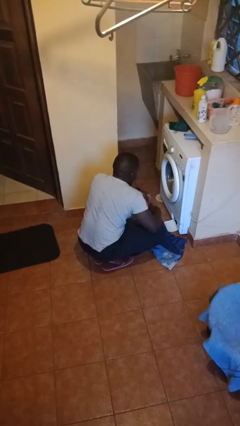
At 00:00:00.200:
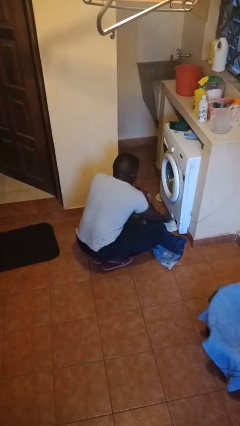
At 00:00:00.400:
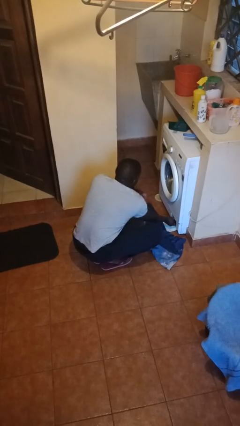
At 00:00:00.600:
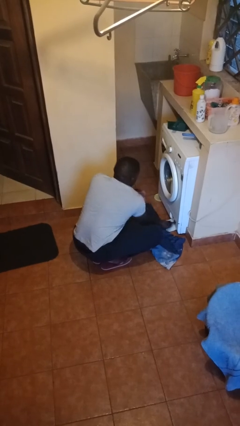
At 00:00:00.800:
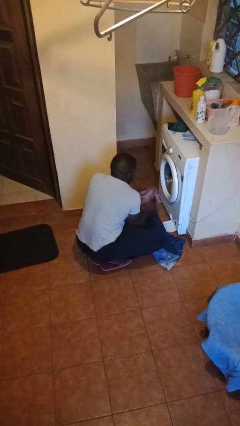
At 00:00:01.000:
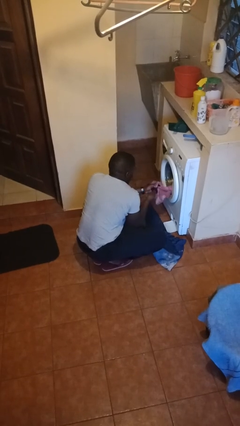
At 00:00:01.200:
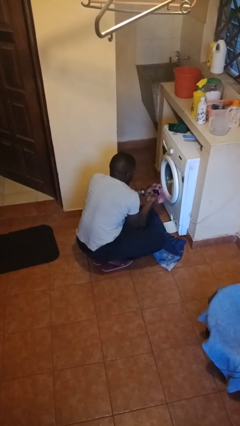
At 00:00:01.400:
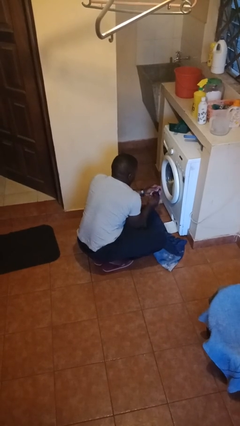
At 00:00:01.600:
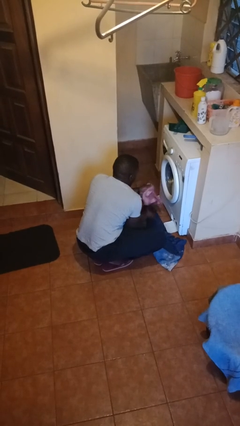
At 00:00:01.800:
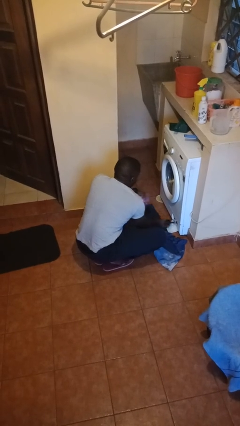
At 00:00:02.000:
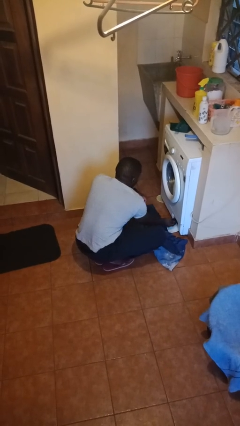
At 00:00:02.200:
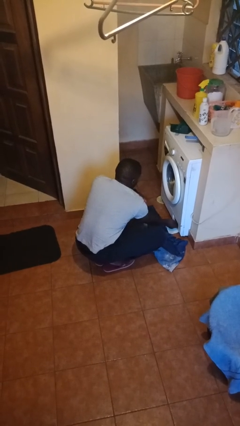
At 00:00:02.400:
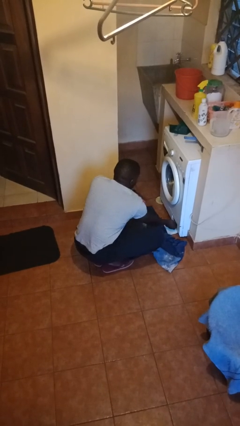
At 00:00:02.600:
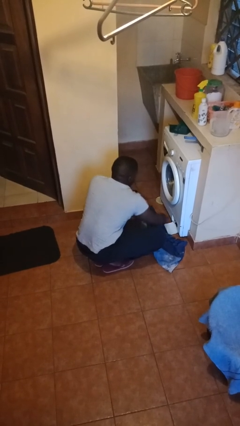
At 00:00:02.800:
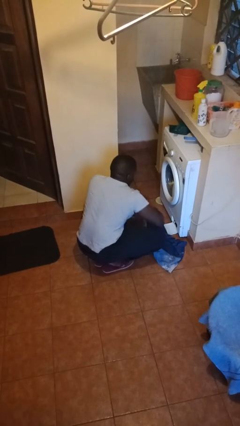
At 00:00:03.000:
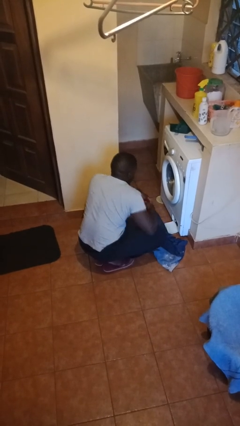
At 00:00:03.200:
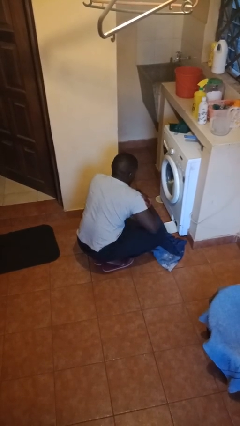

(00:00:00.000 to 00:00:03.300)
person cleans dryer lint trap

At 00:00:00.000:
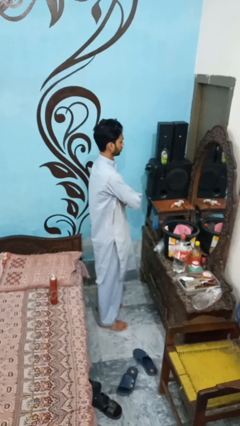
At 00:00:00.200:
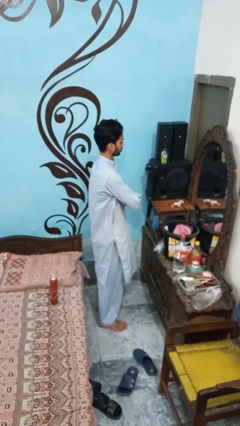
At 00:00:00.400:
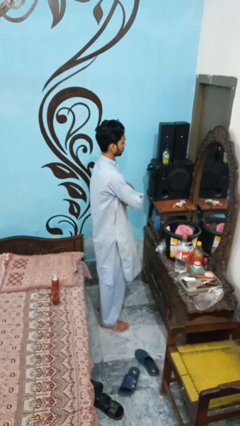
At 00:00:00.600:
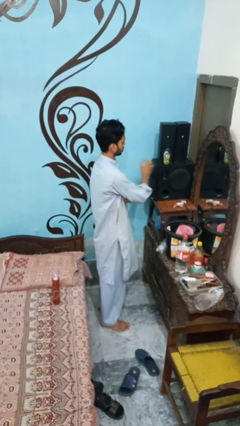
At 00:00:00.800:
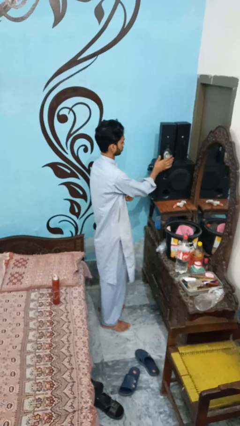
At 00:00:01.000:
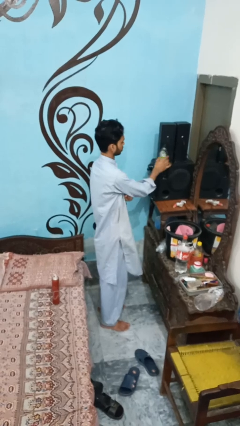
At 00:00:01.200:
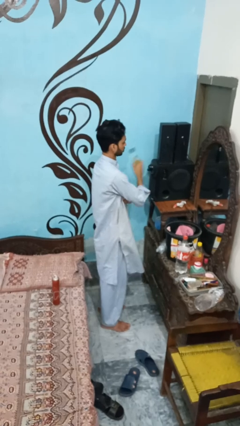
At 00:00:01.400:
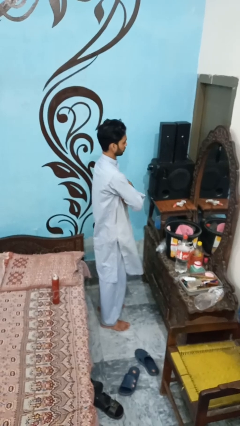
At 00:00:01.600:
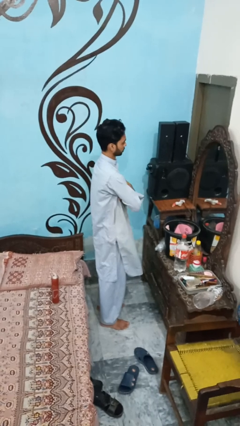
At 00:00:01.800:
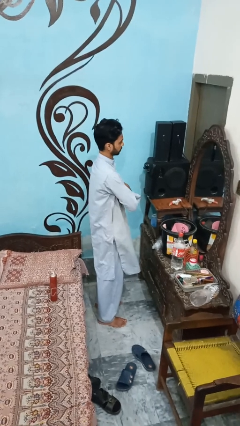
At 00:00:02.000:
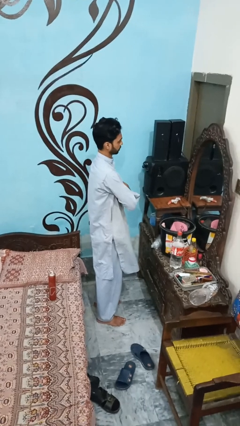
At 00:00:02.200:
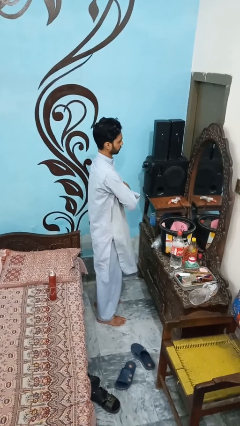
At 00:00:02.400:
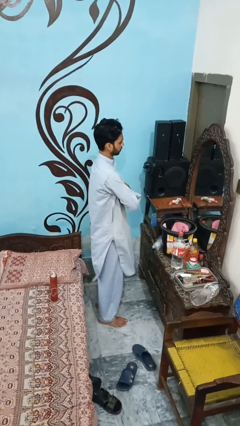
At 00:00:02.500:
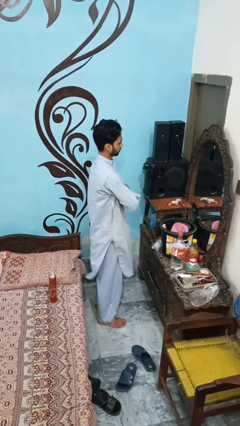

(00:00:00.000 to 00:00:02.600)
person puts down object on shelf

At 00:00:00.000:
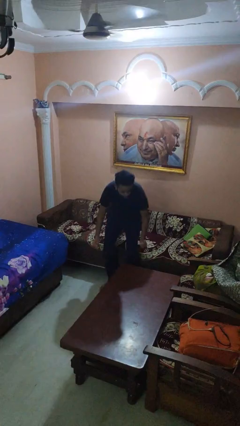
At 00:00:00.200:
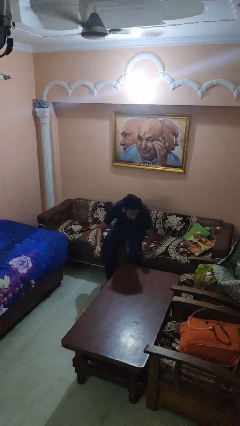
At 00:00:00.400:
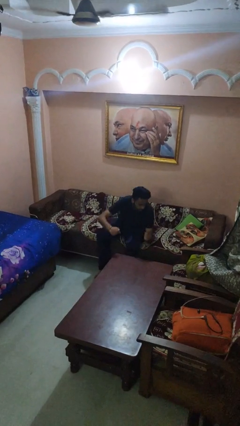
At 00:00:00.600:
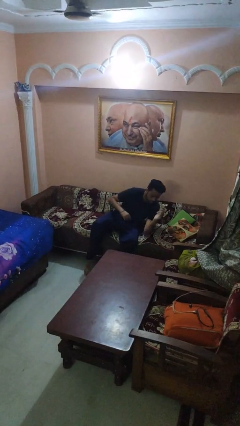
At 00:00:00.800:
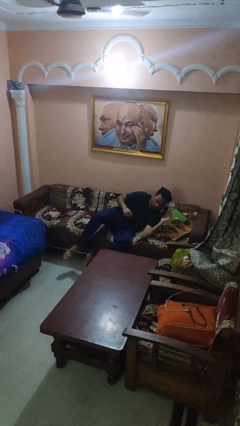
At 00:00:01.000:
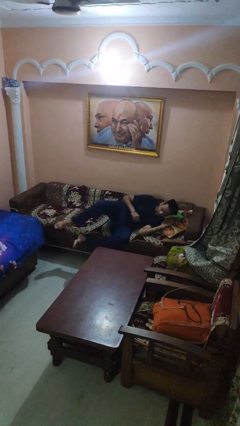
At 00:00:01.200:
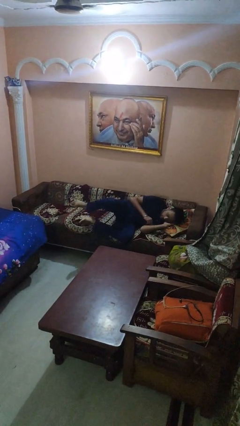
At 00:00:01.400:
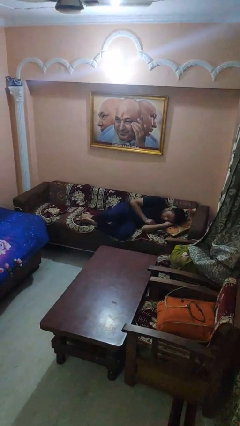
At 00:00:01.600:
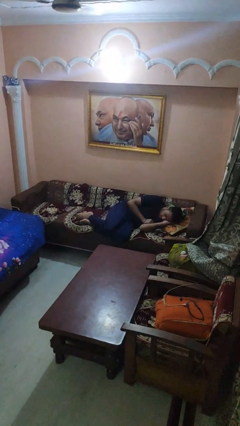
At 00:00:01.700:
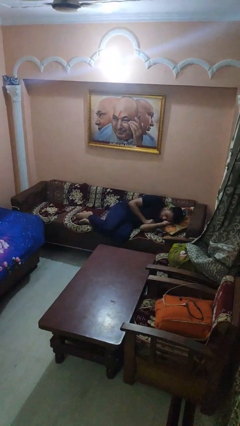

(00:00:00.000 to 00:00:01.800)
person lies down on couch

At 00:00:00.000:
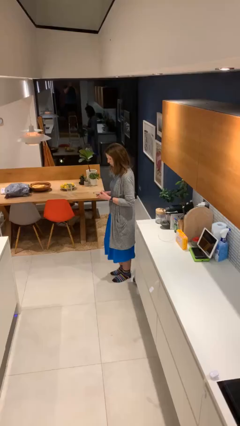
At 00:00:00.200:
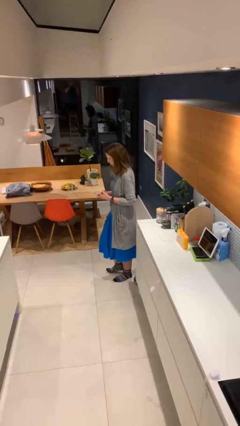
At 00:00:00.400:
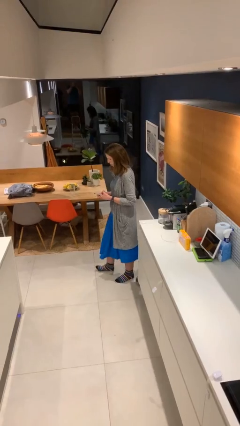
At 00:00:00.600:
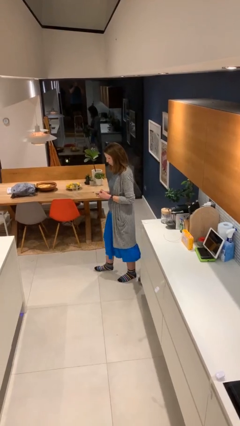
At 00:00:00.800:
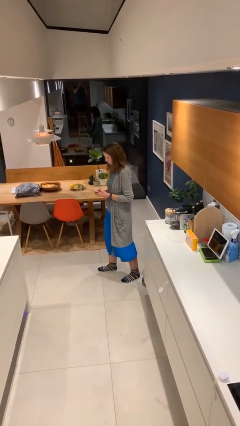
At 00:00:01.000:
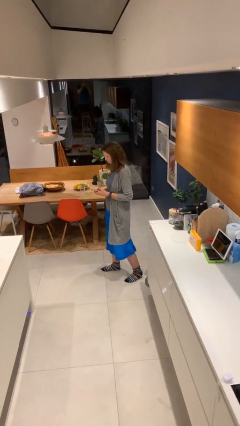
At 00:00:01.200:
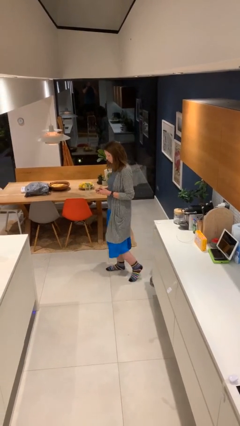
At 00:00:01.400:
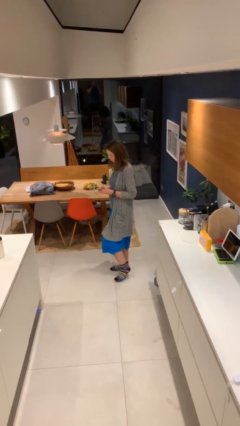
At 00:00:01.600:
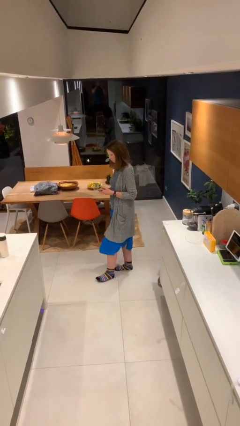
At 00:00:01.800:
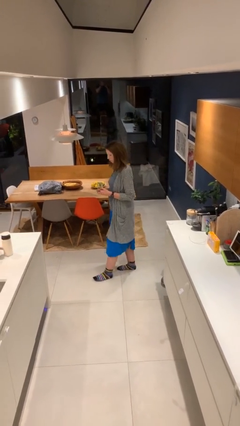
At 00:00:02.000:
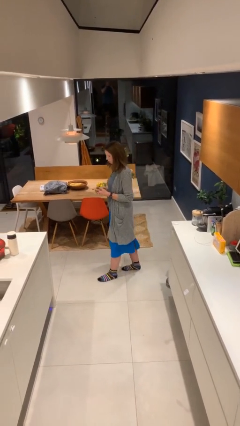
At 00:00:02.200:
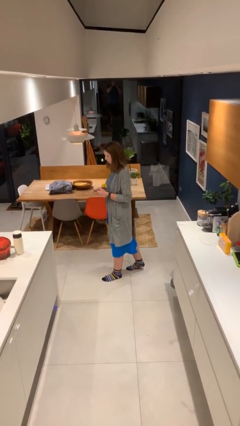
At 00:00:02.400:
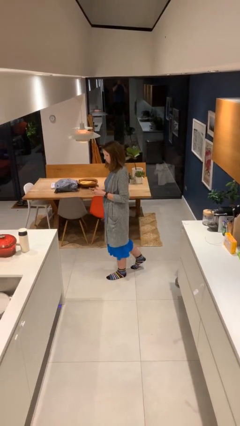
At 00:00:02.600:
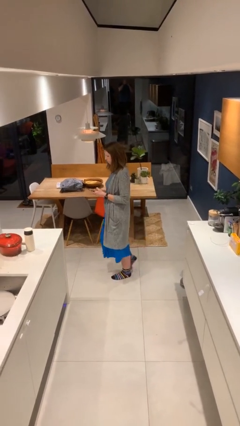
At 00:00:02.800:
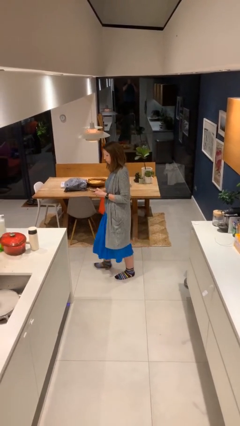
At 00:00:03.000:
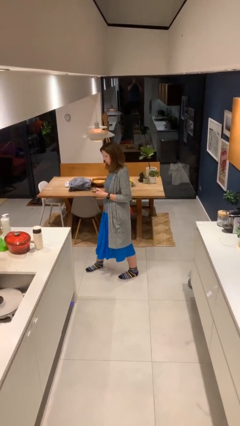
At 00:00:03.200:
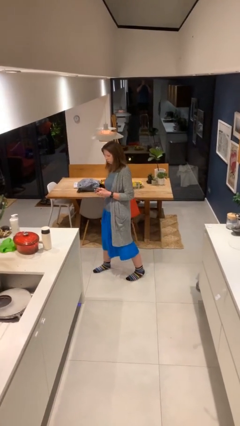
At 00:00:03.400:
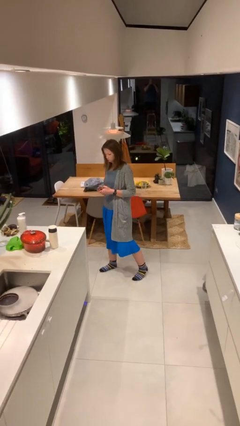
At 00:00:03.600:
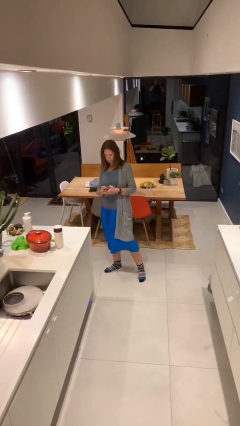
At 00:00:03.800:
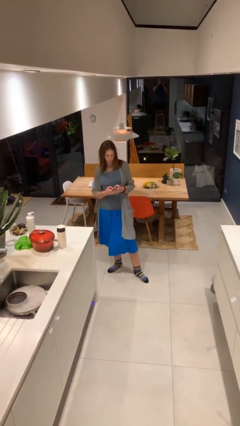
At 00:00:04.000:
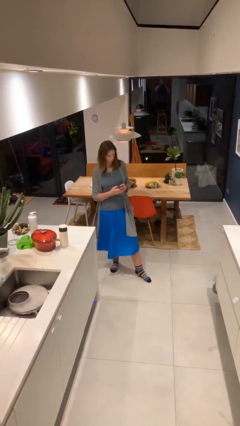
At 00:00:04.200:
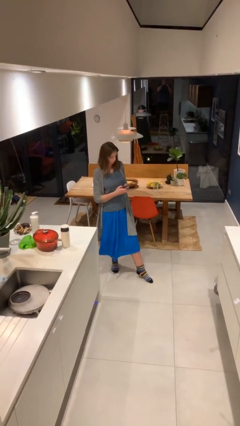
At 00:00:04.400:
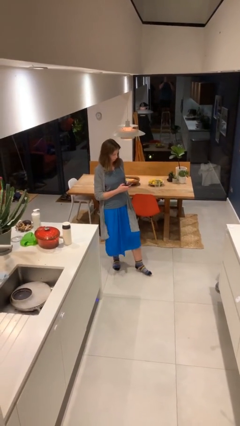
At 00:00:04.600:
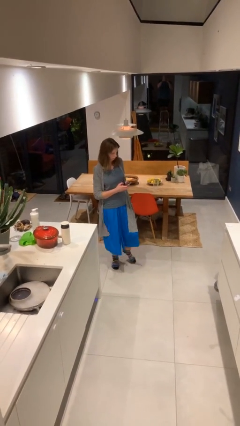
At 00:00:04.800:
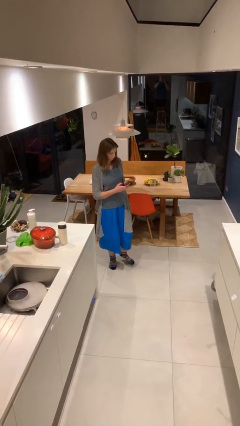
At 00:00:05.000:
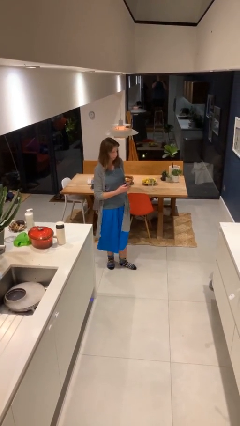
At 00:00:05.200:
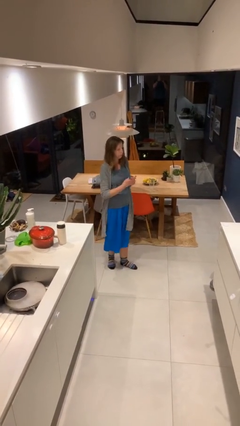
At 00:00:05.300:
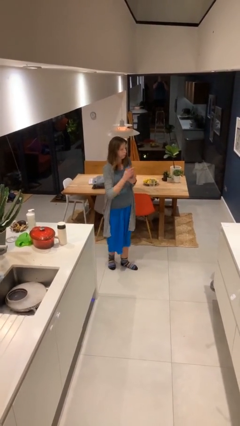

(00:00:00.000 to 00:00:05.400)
person texts on phone

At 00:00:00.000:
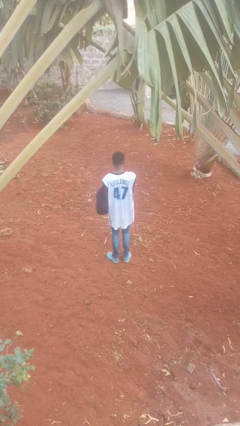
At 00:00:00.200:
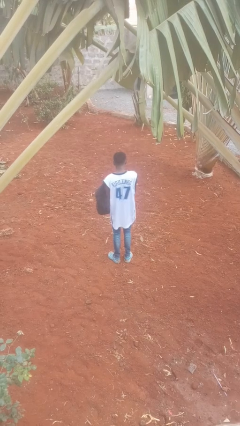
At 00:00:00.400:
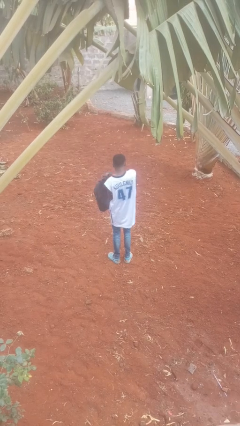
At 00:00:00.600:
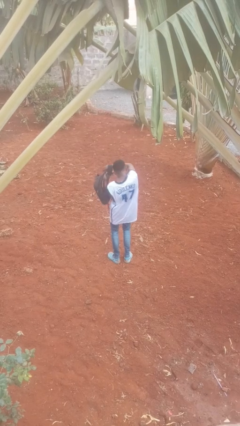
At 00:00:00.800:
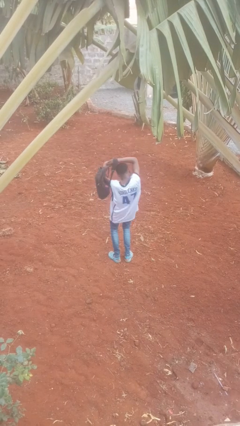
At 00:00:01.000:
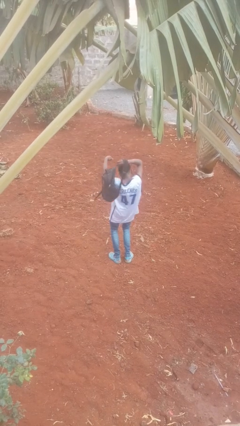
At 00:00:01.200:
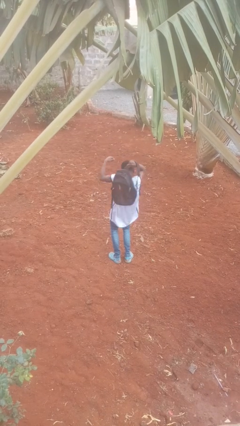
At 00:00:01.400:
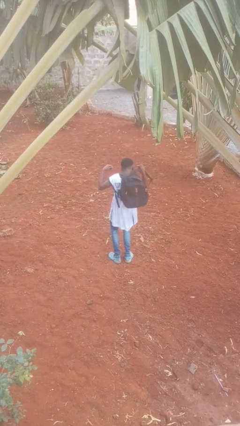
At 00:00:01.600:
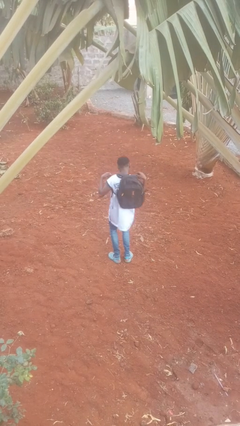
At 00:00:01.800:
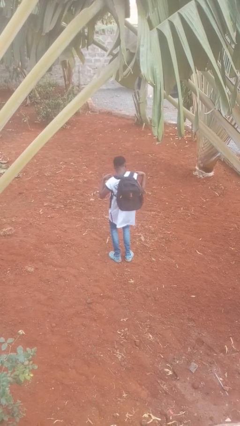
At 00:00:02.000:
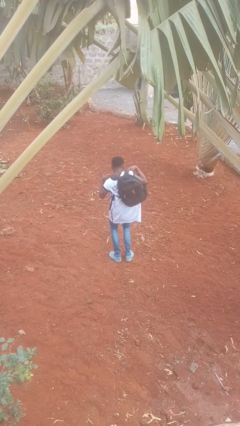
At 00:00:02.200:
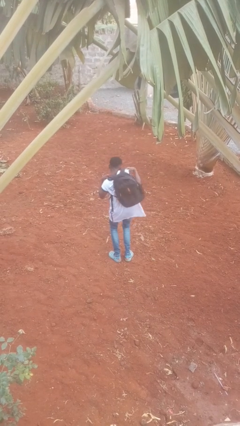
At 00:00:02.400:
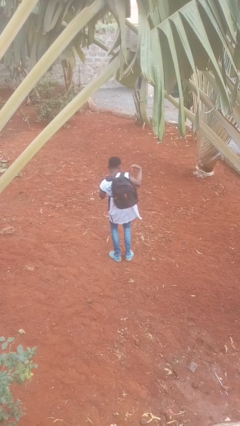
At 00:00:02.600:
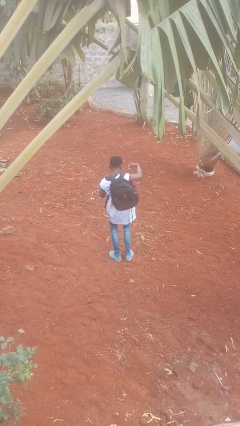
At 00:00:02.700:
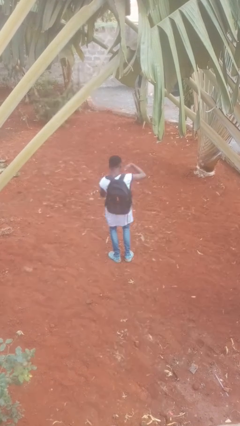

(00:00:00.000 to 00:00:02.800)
person puts on backpack

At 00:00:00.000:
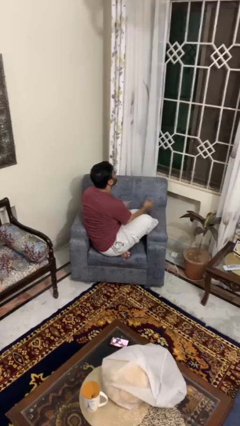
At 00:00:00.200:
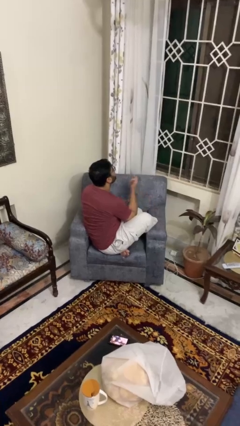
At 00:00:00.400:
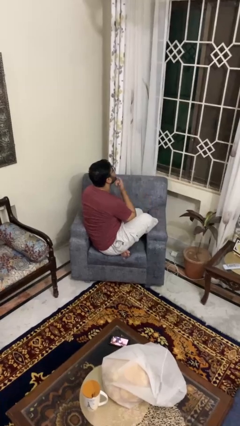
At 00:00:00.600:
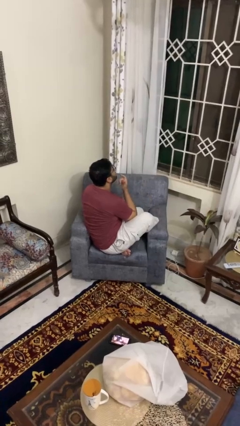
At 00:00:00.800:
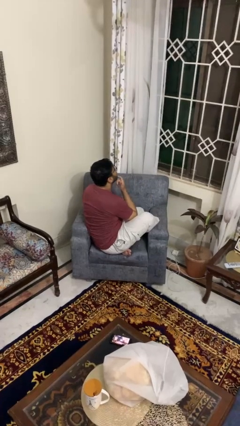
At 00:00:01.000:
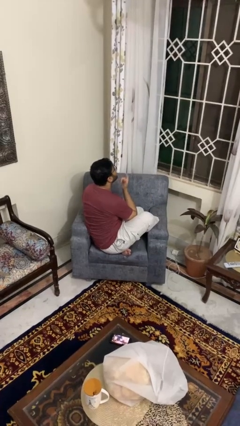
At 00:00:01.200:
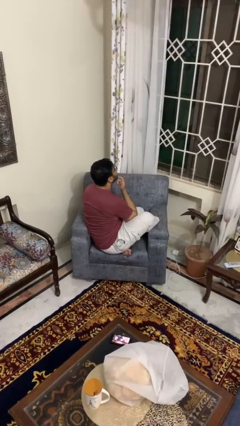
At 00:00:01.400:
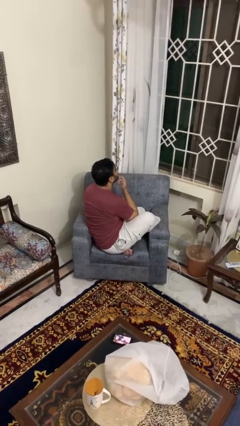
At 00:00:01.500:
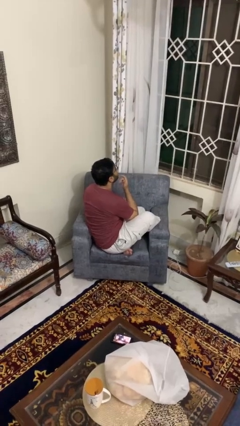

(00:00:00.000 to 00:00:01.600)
person strokes chin
